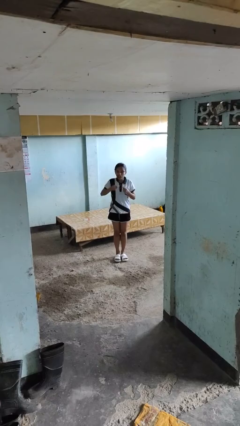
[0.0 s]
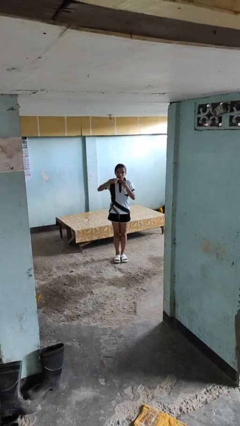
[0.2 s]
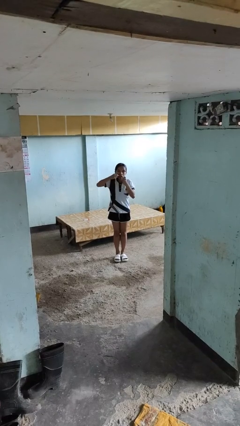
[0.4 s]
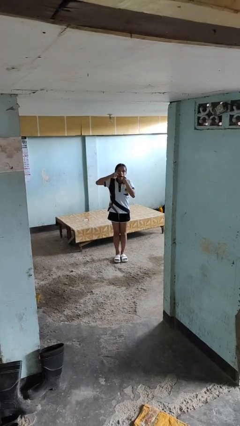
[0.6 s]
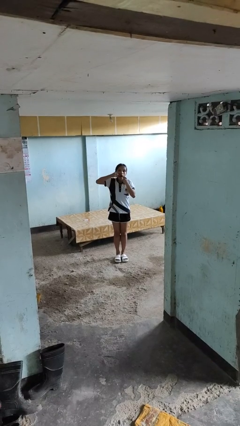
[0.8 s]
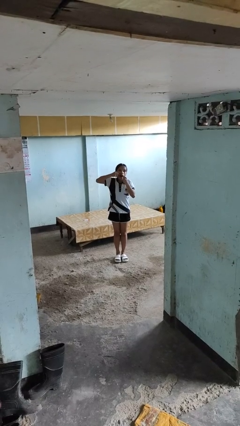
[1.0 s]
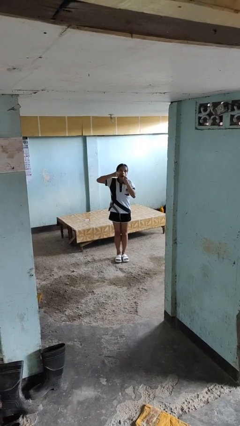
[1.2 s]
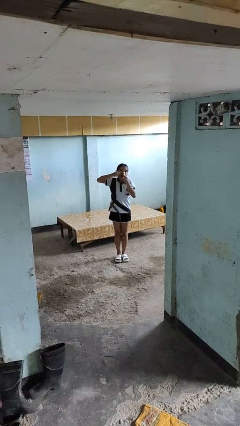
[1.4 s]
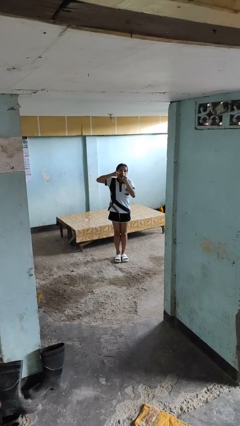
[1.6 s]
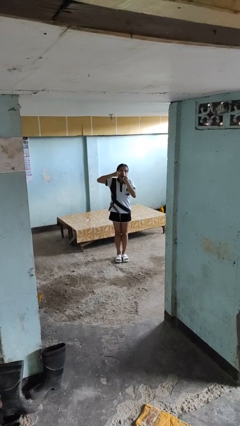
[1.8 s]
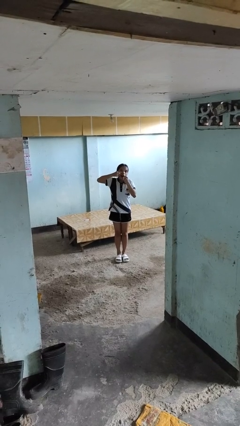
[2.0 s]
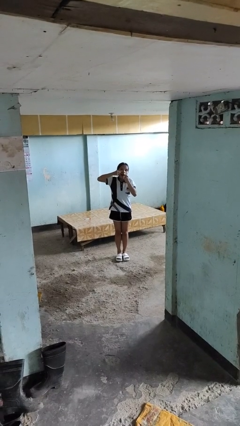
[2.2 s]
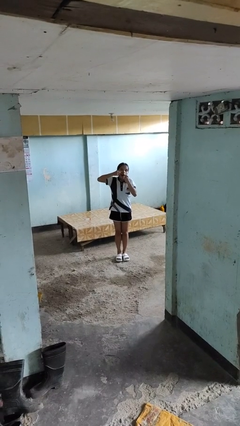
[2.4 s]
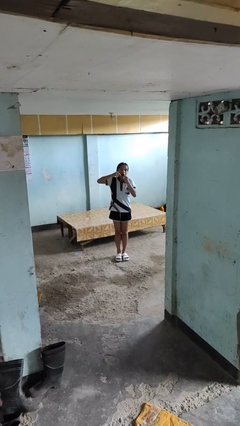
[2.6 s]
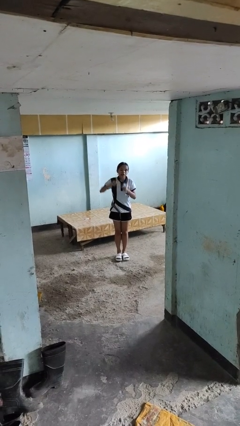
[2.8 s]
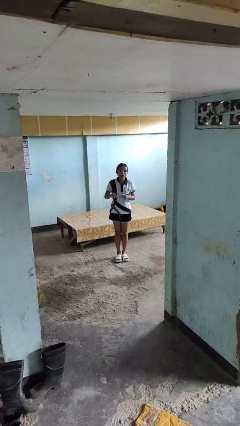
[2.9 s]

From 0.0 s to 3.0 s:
person flosses

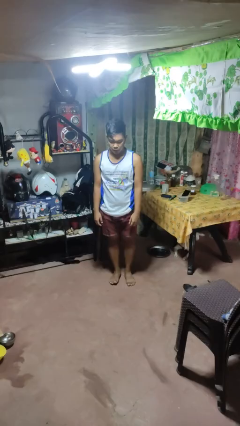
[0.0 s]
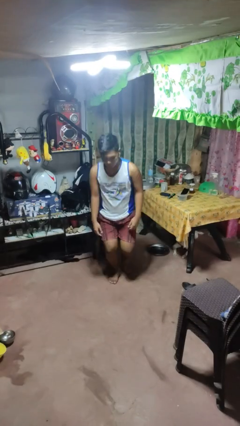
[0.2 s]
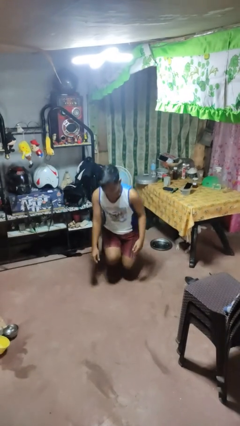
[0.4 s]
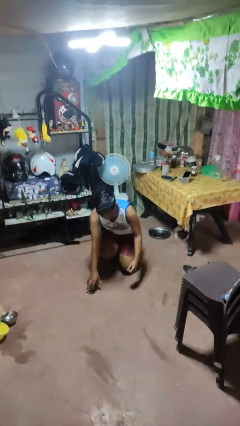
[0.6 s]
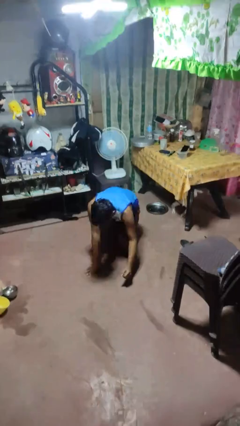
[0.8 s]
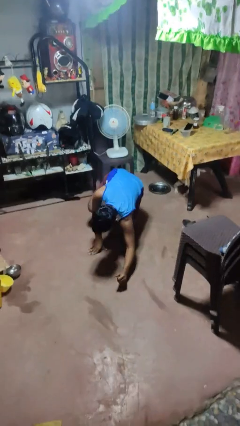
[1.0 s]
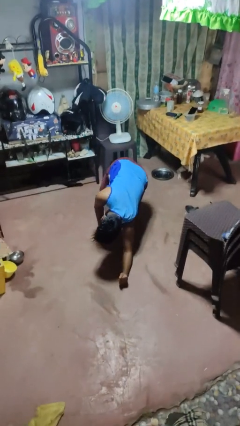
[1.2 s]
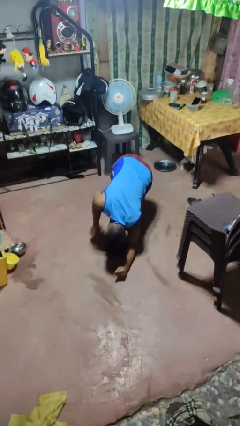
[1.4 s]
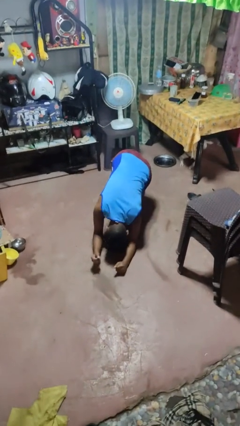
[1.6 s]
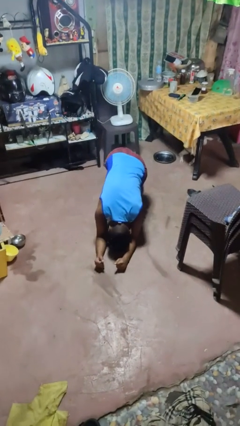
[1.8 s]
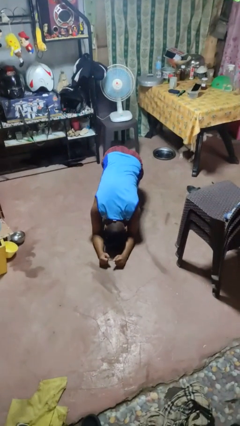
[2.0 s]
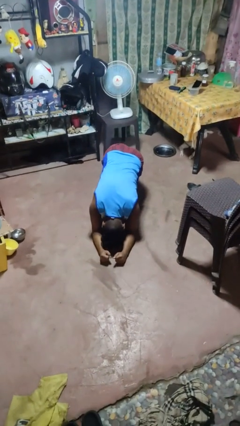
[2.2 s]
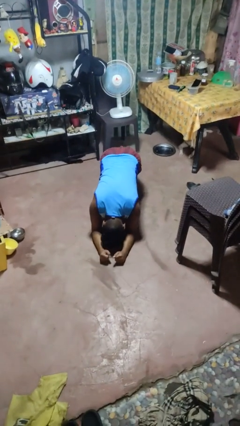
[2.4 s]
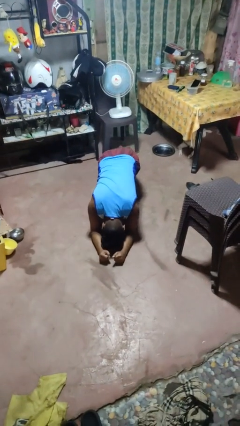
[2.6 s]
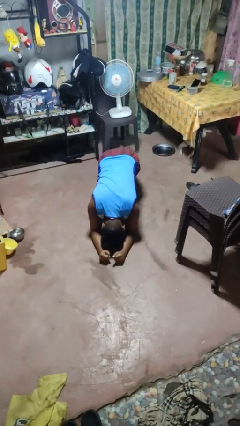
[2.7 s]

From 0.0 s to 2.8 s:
person exercises with plank

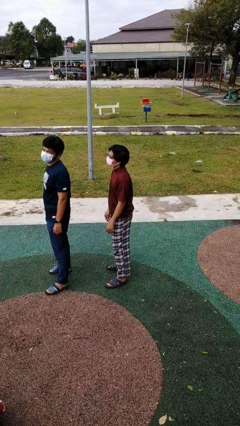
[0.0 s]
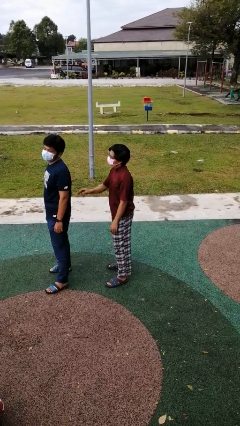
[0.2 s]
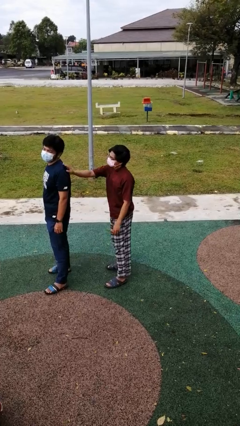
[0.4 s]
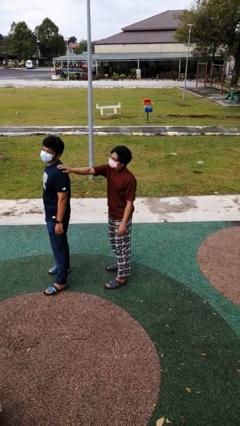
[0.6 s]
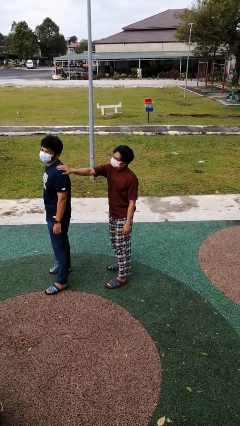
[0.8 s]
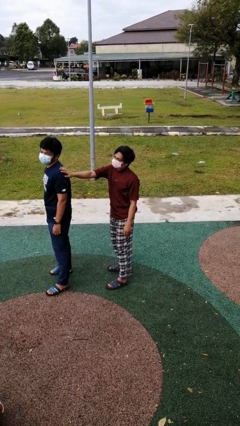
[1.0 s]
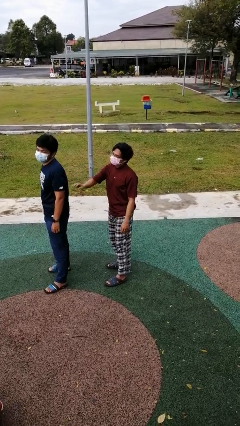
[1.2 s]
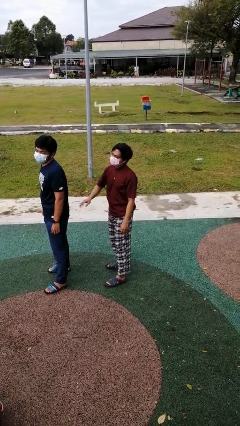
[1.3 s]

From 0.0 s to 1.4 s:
person touches back of person

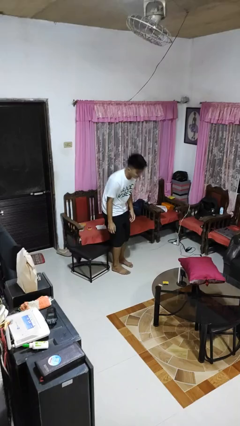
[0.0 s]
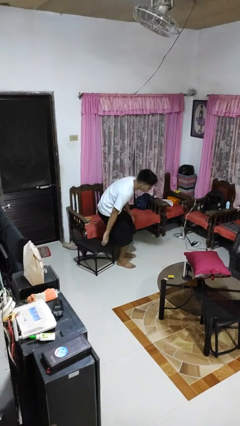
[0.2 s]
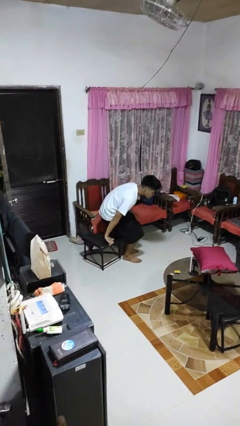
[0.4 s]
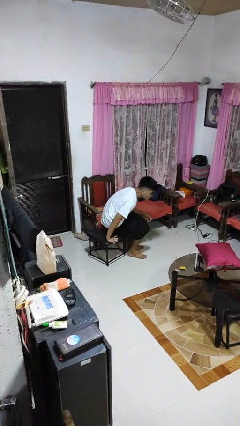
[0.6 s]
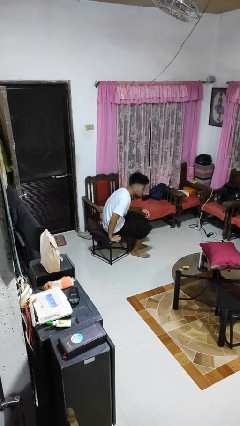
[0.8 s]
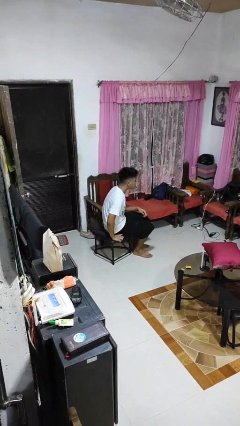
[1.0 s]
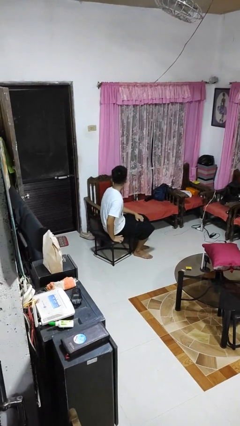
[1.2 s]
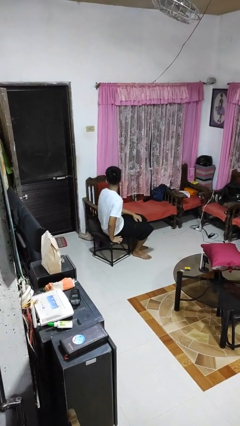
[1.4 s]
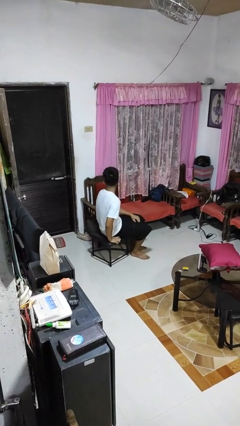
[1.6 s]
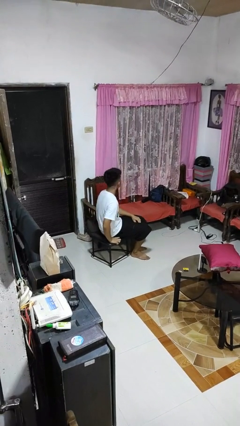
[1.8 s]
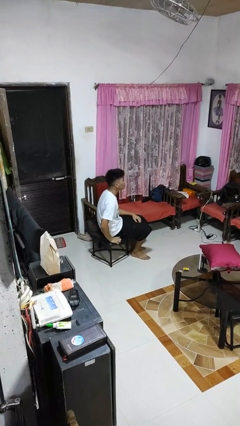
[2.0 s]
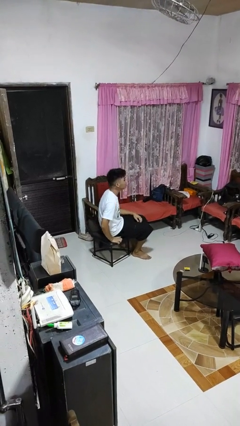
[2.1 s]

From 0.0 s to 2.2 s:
person sits down

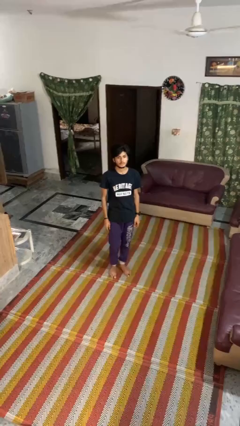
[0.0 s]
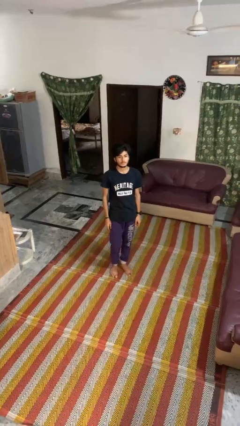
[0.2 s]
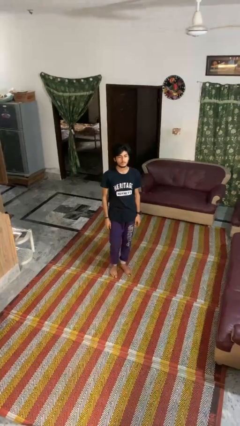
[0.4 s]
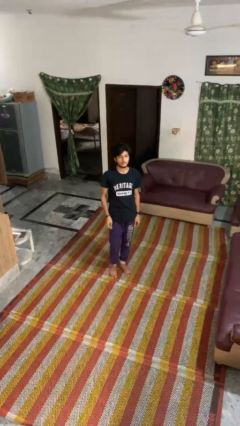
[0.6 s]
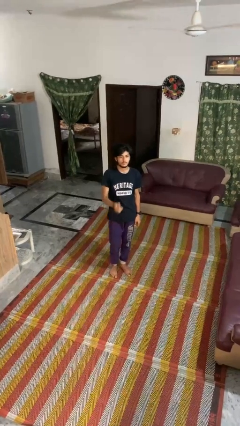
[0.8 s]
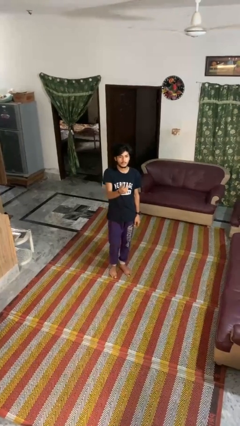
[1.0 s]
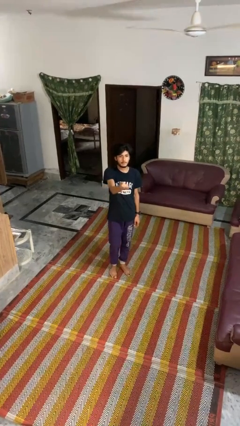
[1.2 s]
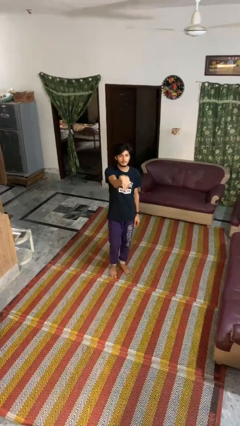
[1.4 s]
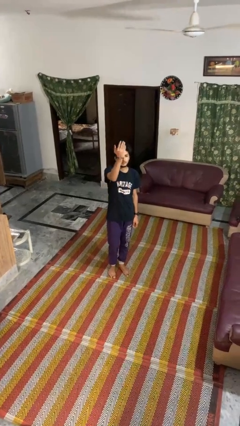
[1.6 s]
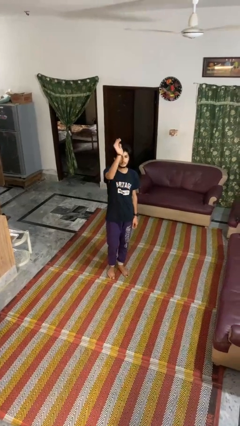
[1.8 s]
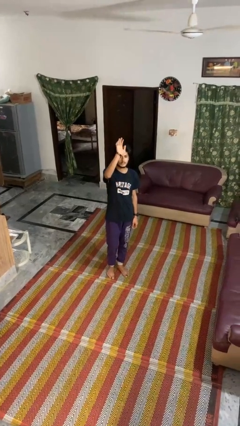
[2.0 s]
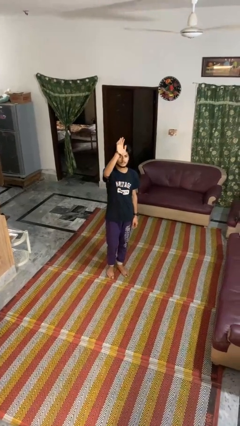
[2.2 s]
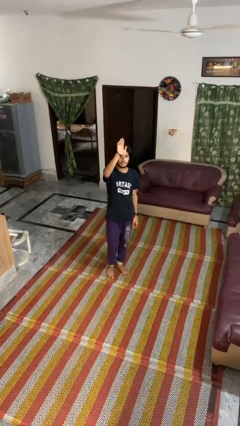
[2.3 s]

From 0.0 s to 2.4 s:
person gestures swipe up

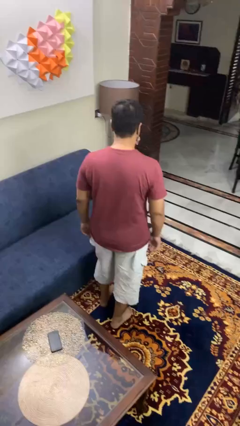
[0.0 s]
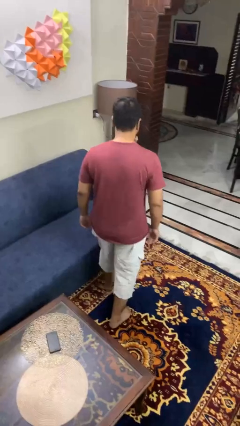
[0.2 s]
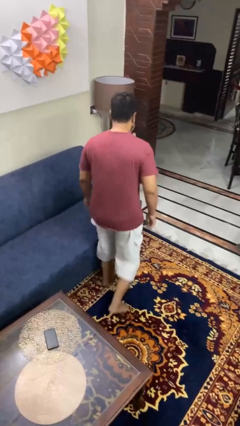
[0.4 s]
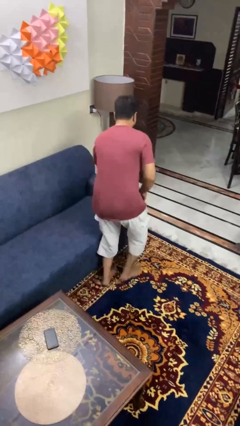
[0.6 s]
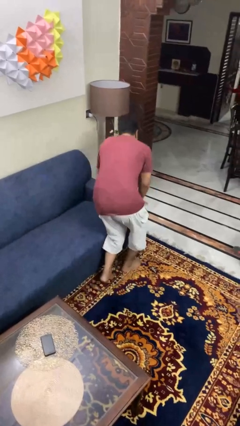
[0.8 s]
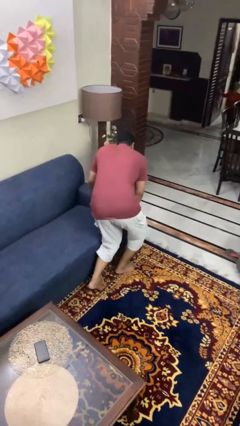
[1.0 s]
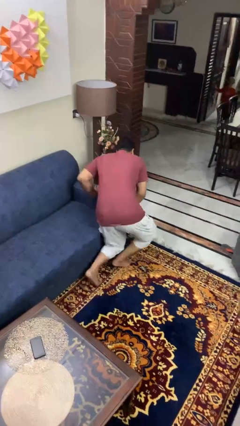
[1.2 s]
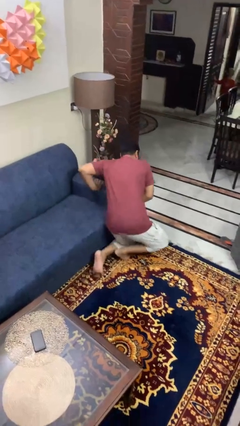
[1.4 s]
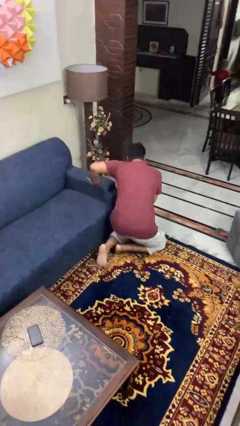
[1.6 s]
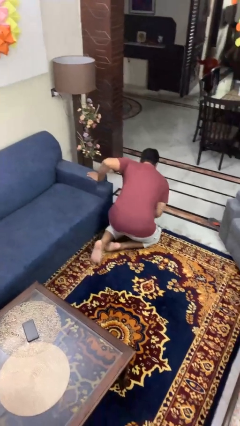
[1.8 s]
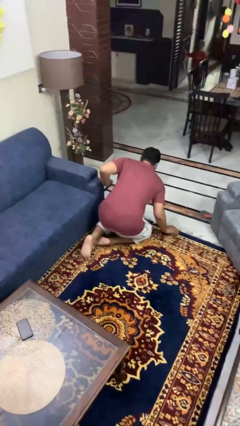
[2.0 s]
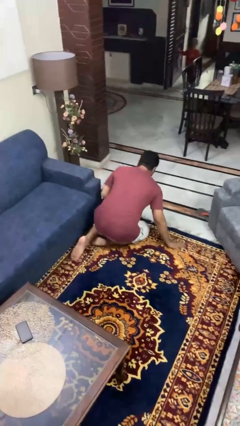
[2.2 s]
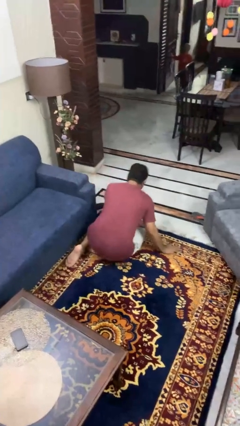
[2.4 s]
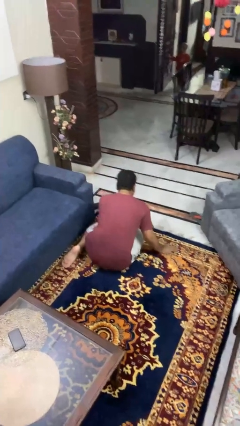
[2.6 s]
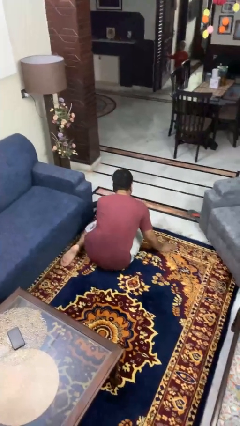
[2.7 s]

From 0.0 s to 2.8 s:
person trips on object on floor

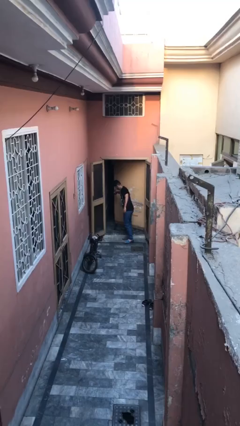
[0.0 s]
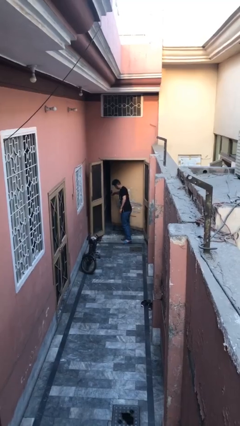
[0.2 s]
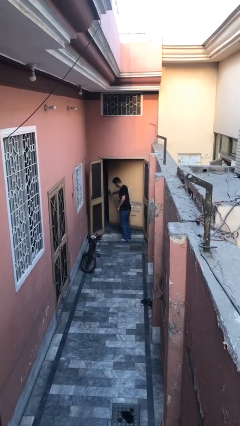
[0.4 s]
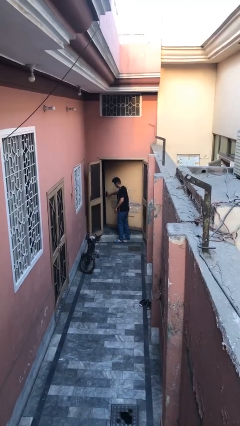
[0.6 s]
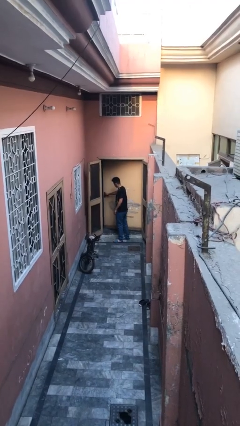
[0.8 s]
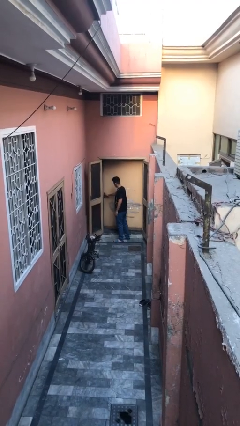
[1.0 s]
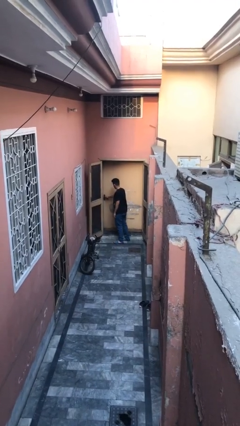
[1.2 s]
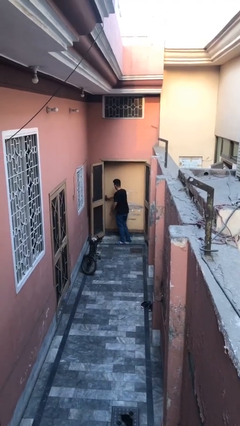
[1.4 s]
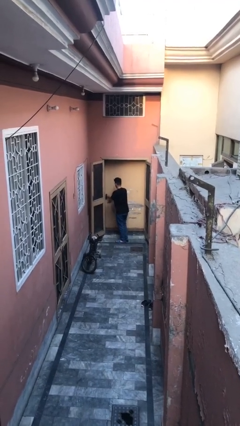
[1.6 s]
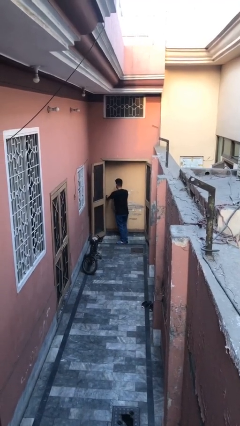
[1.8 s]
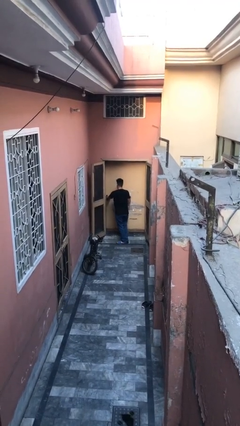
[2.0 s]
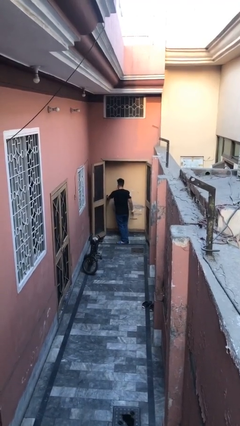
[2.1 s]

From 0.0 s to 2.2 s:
person closes facility door
